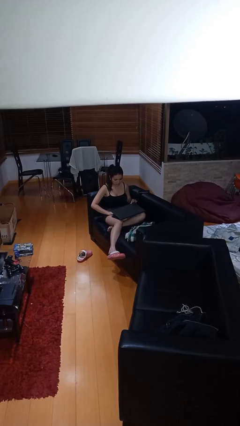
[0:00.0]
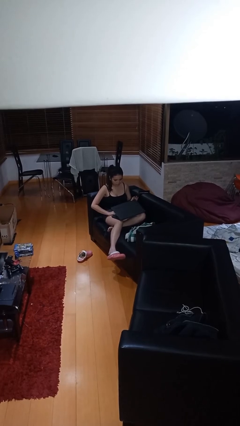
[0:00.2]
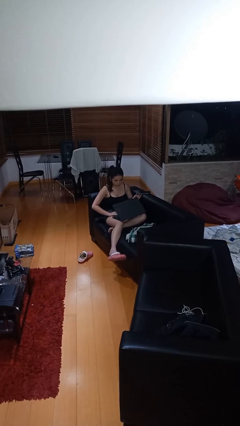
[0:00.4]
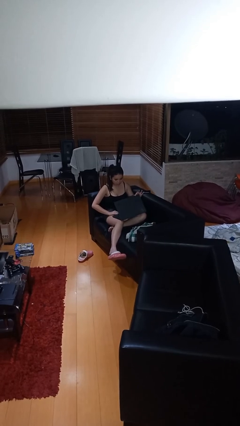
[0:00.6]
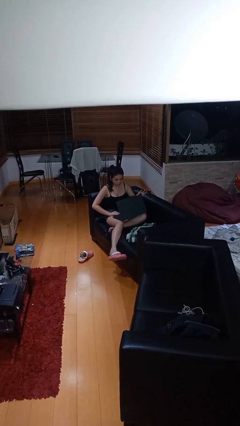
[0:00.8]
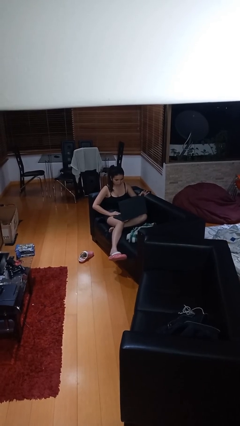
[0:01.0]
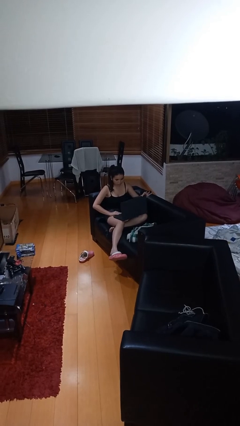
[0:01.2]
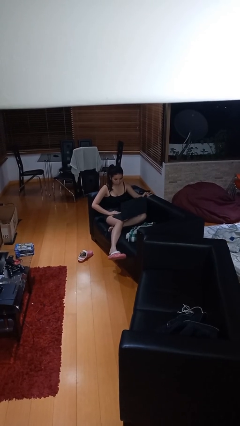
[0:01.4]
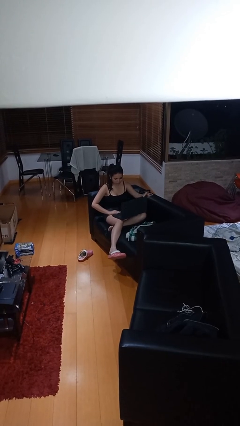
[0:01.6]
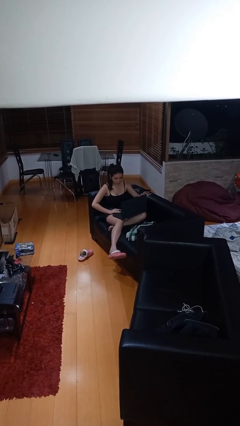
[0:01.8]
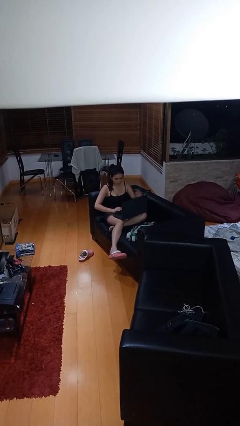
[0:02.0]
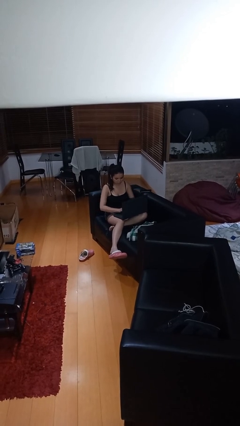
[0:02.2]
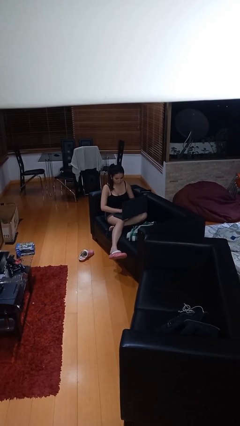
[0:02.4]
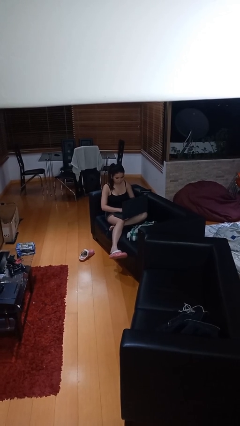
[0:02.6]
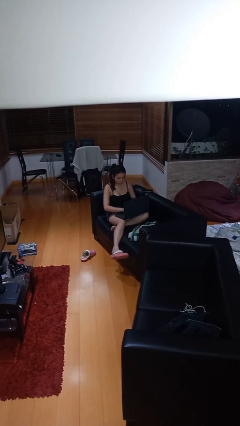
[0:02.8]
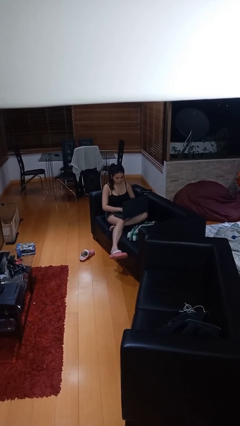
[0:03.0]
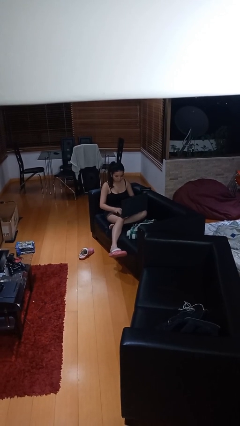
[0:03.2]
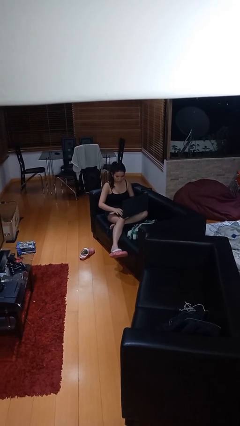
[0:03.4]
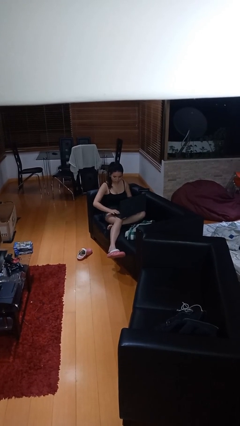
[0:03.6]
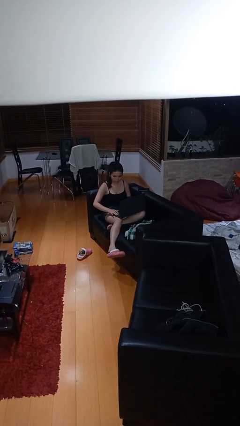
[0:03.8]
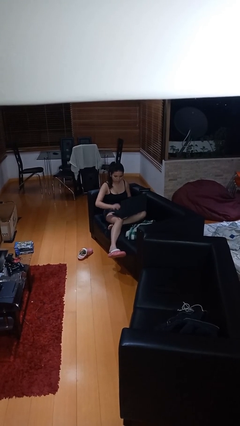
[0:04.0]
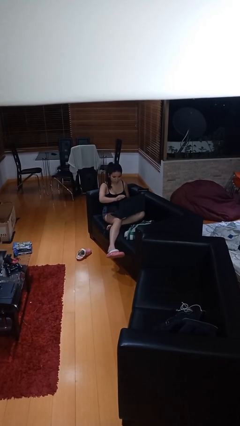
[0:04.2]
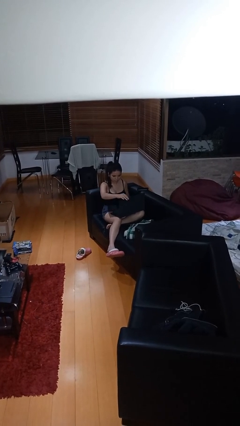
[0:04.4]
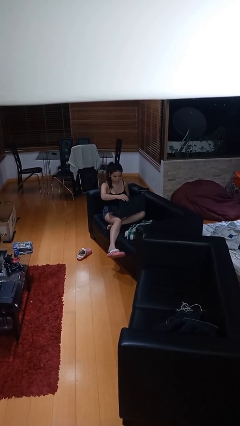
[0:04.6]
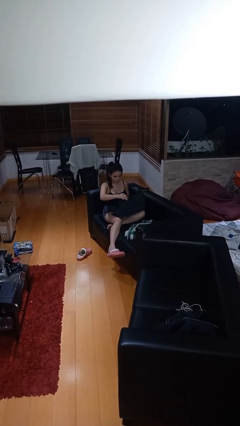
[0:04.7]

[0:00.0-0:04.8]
person interacts with laptop

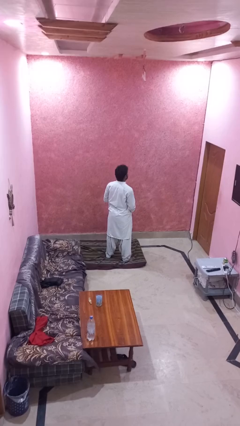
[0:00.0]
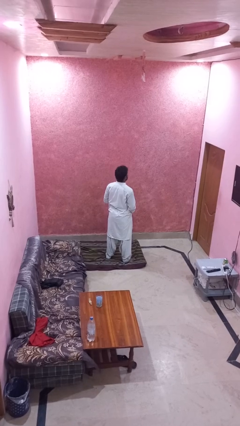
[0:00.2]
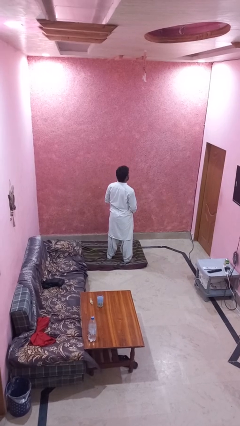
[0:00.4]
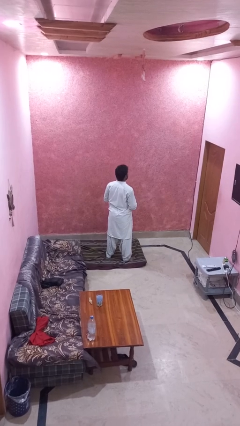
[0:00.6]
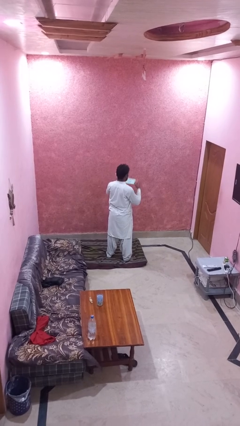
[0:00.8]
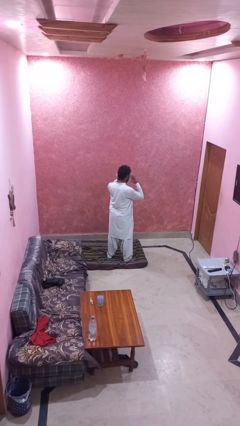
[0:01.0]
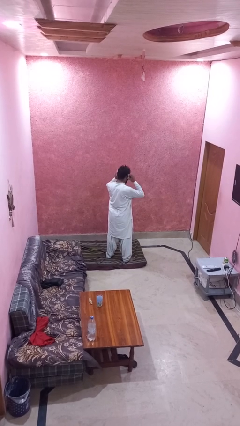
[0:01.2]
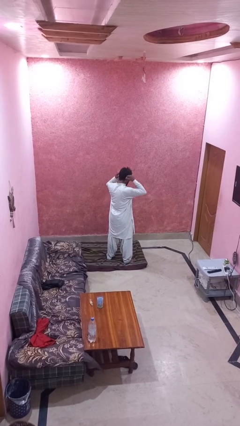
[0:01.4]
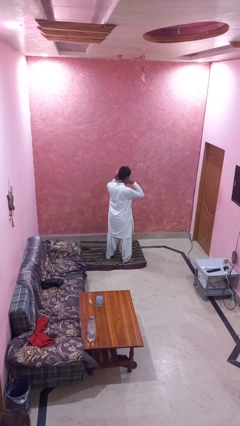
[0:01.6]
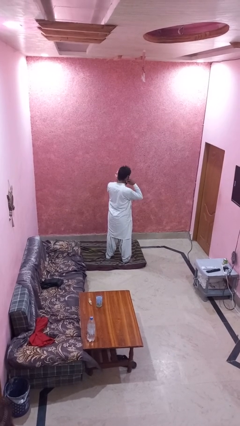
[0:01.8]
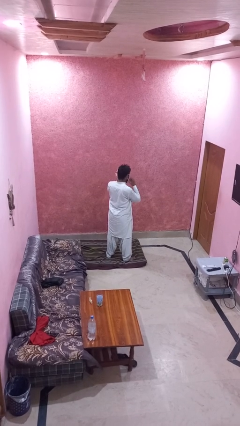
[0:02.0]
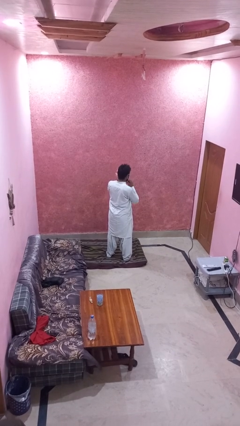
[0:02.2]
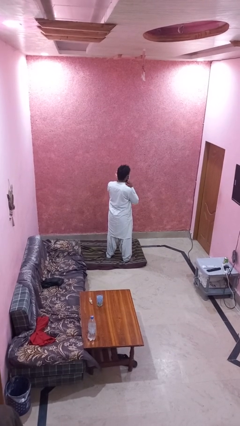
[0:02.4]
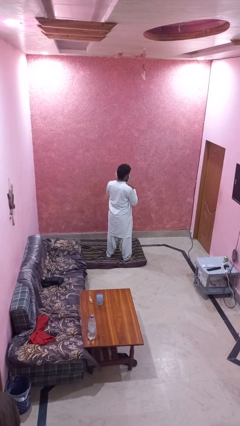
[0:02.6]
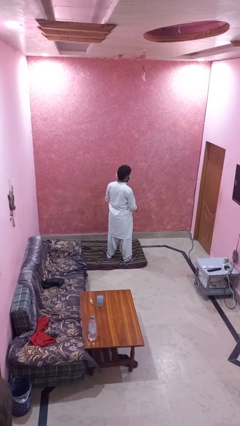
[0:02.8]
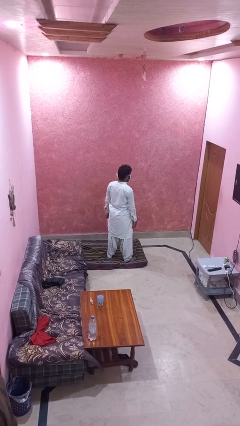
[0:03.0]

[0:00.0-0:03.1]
person puts on facemask

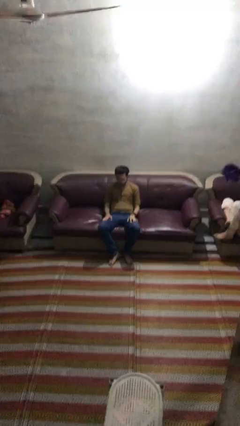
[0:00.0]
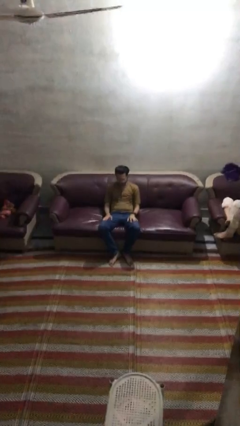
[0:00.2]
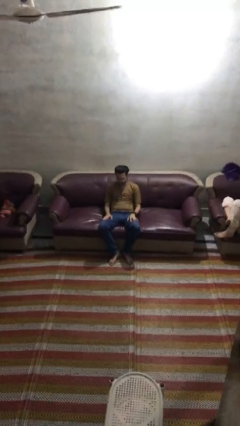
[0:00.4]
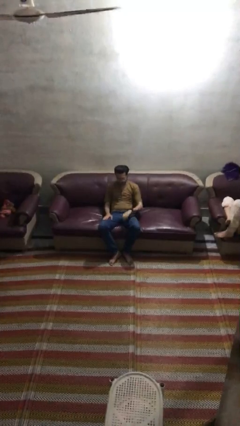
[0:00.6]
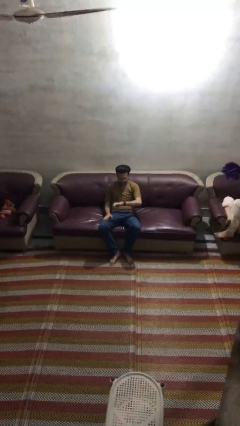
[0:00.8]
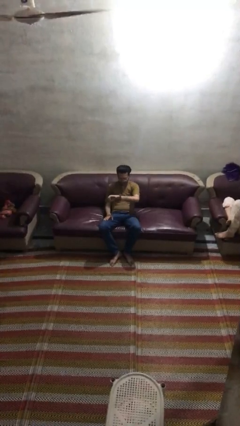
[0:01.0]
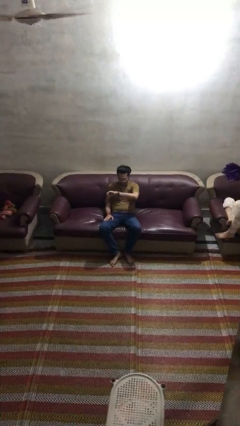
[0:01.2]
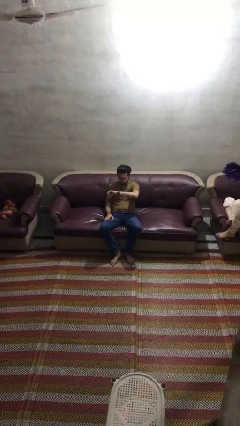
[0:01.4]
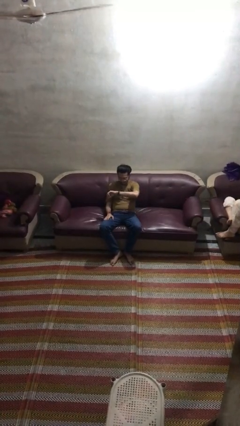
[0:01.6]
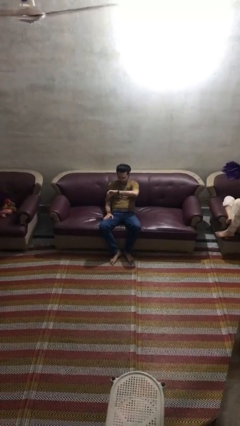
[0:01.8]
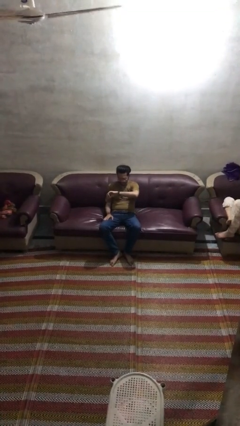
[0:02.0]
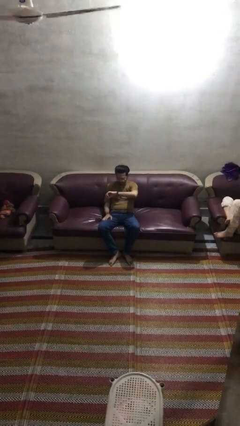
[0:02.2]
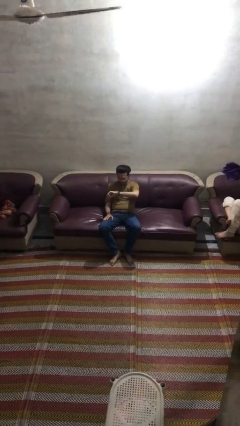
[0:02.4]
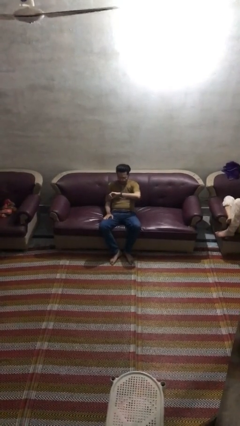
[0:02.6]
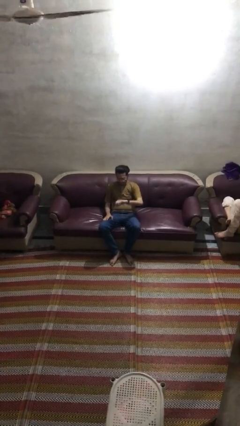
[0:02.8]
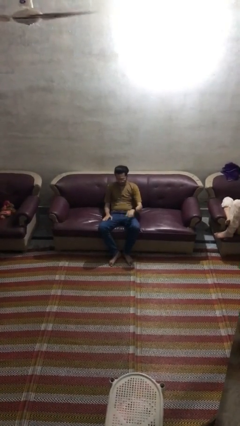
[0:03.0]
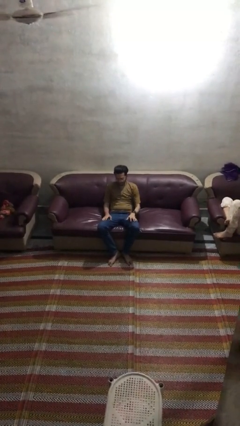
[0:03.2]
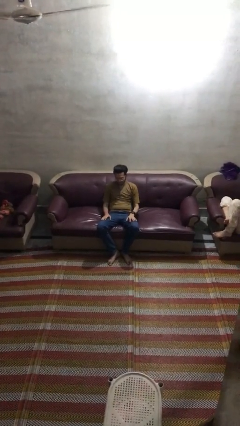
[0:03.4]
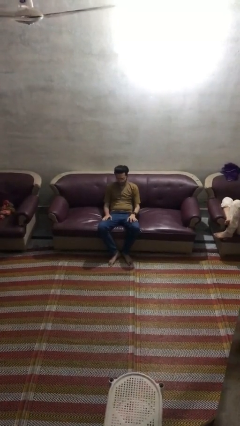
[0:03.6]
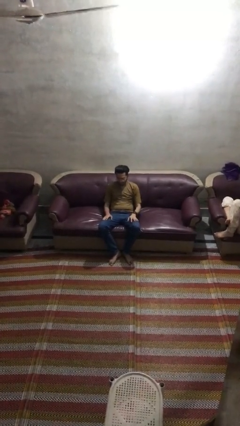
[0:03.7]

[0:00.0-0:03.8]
person looks at wristwatch

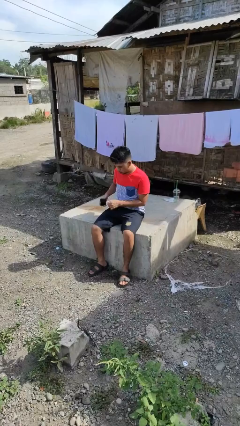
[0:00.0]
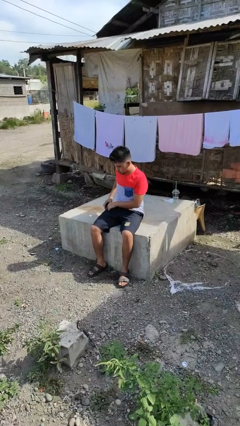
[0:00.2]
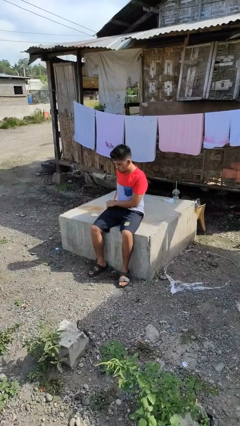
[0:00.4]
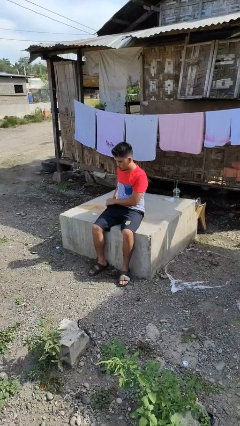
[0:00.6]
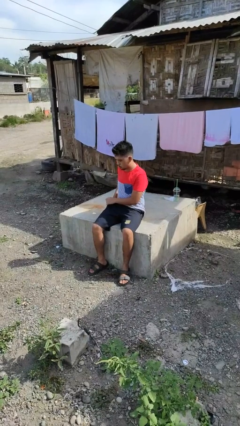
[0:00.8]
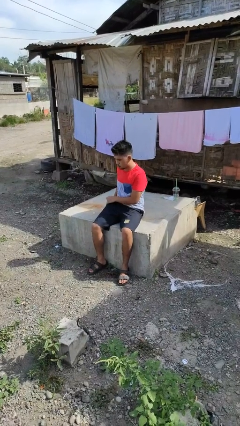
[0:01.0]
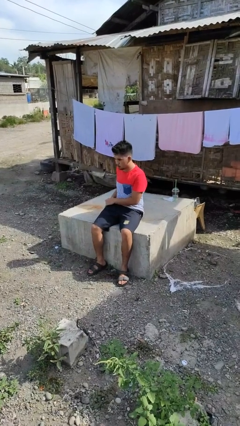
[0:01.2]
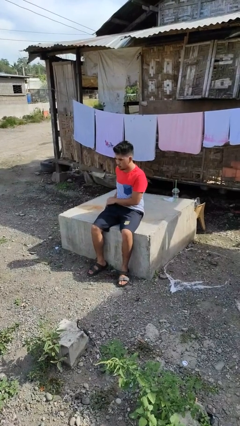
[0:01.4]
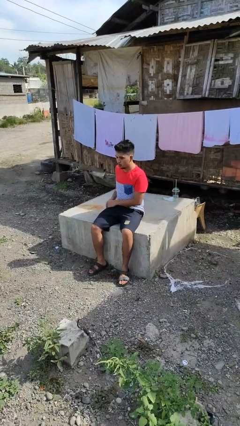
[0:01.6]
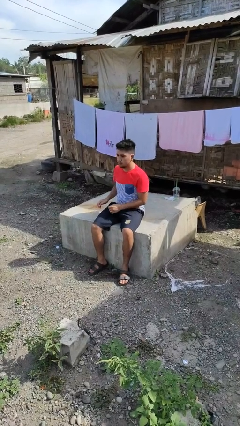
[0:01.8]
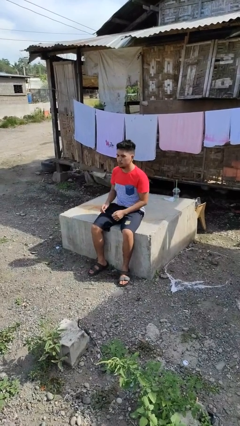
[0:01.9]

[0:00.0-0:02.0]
person puts phone into pocket

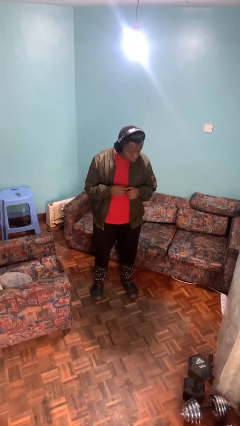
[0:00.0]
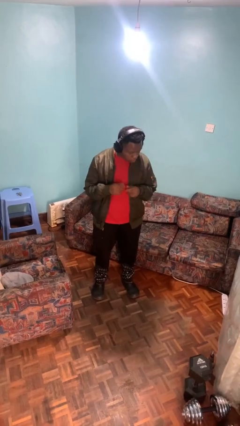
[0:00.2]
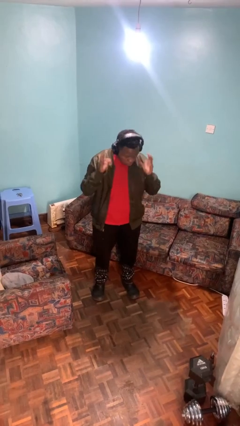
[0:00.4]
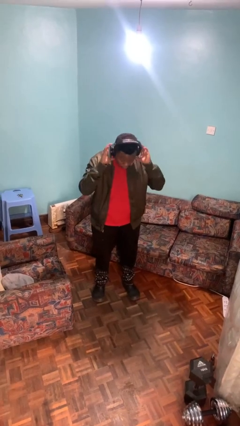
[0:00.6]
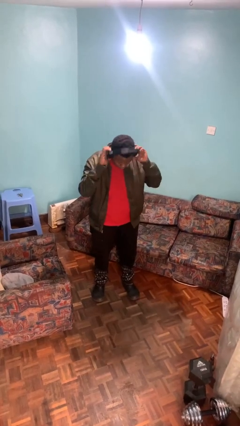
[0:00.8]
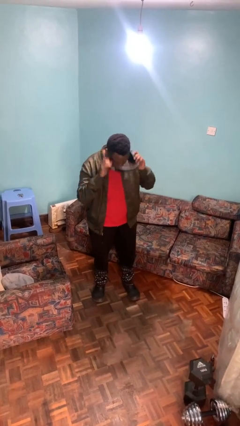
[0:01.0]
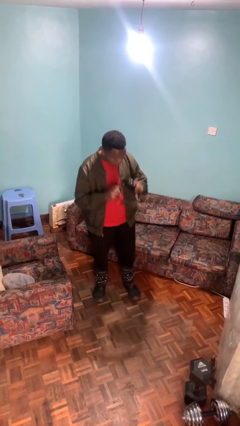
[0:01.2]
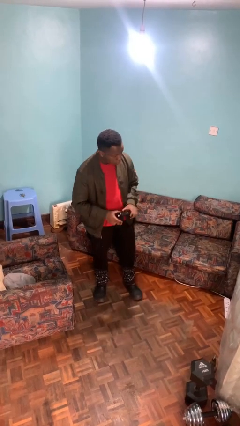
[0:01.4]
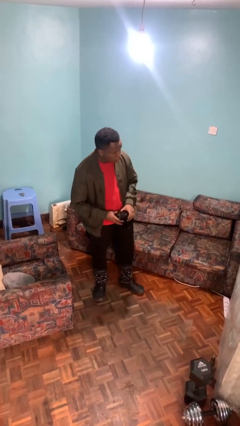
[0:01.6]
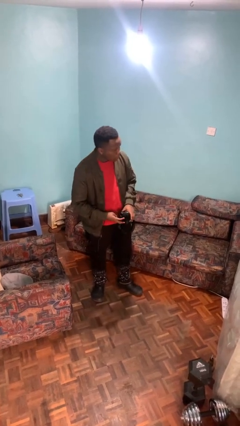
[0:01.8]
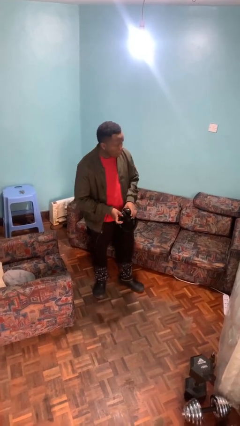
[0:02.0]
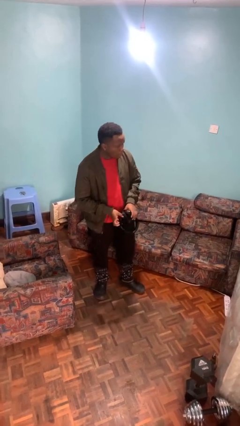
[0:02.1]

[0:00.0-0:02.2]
person takes off headphones

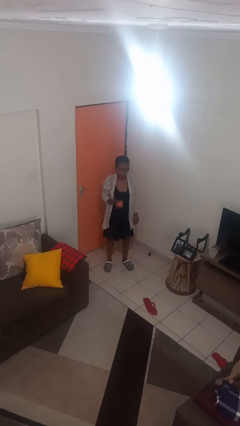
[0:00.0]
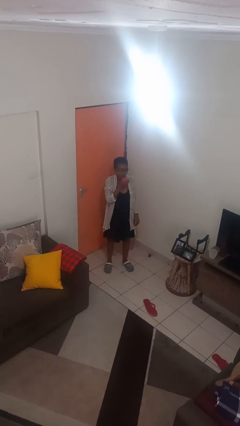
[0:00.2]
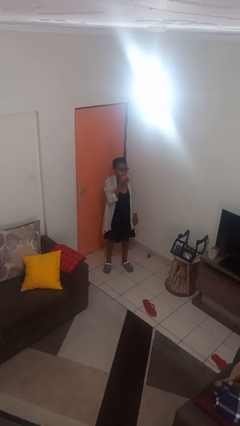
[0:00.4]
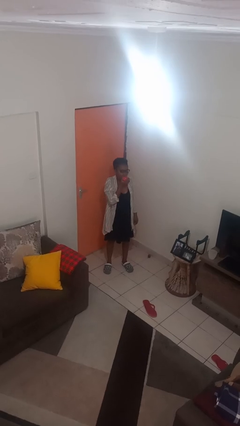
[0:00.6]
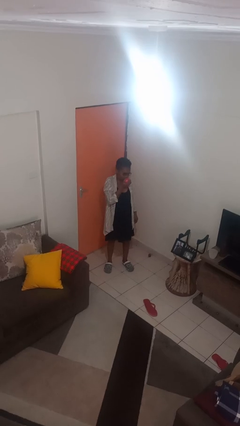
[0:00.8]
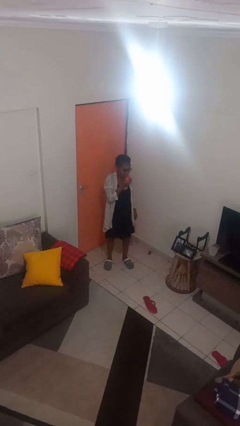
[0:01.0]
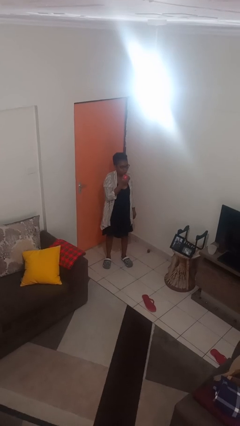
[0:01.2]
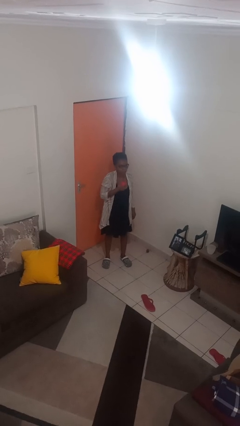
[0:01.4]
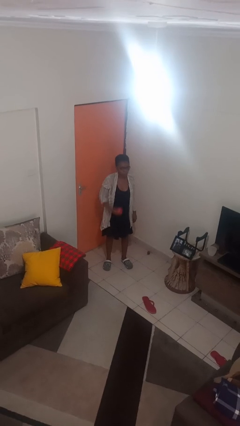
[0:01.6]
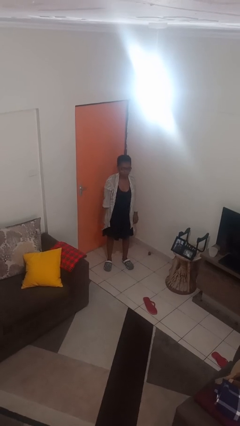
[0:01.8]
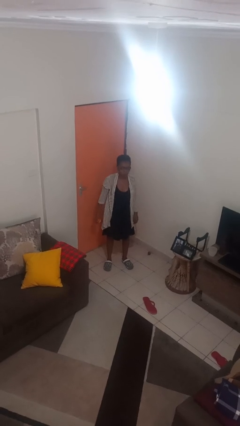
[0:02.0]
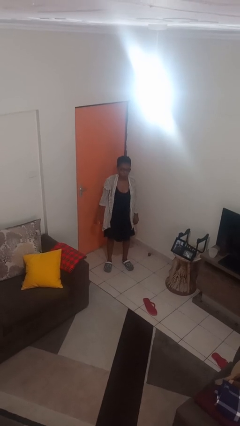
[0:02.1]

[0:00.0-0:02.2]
person eats apple
